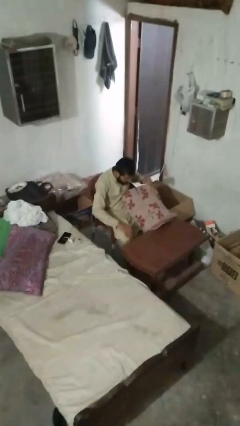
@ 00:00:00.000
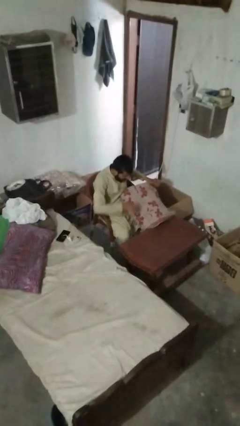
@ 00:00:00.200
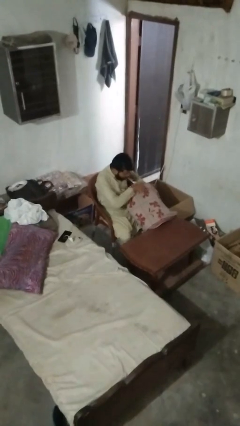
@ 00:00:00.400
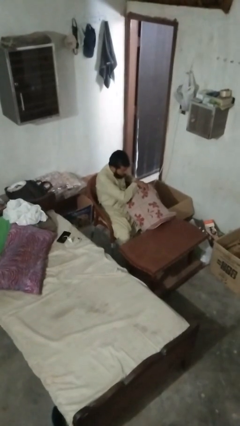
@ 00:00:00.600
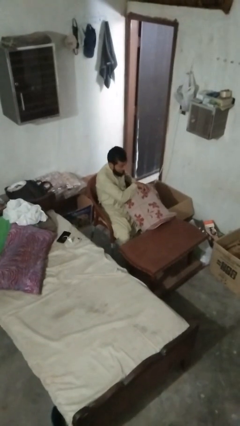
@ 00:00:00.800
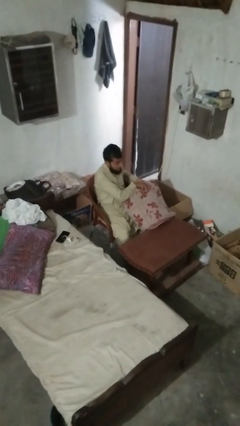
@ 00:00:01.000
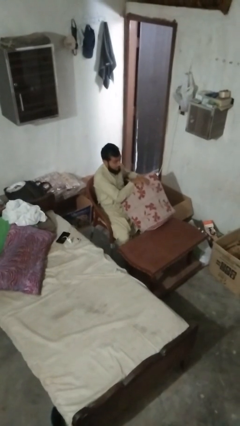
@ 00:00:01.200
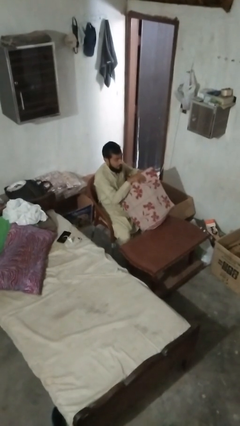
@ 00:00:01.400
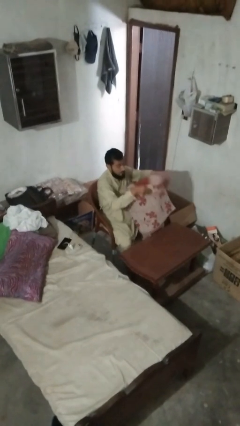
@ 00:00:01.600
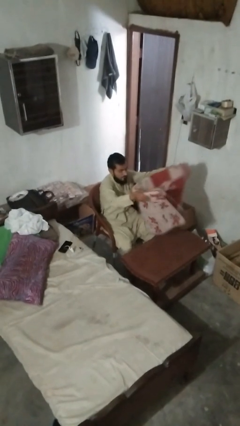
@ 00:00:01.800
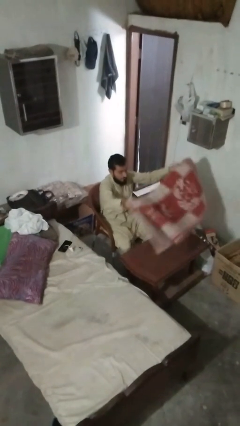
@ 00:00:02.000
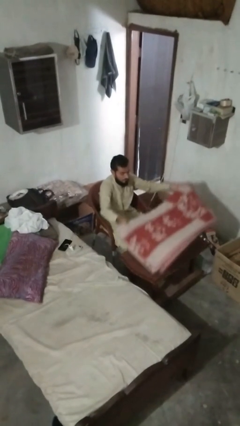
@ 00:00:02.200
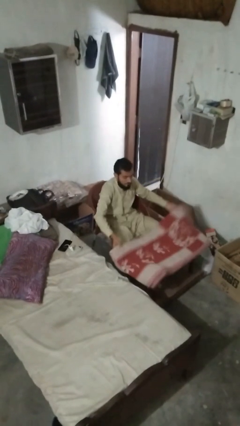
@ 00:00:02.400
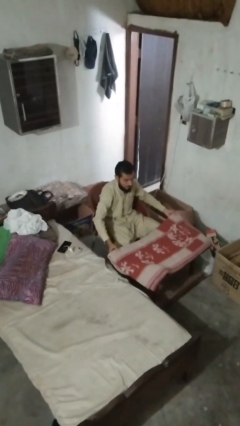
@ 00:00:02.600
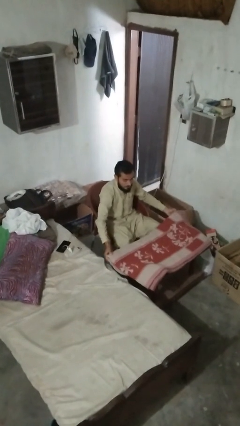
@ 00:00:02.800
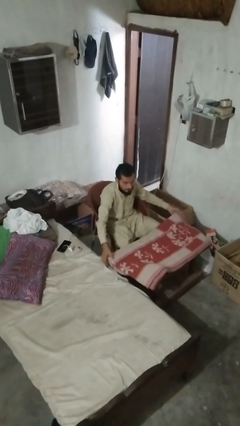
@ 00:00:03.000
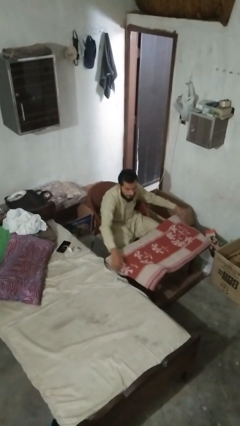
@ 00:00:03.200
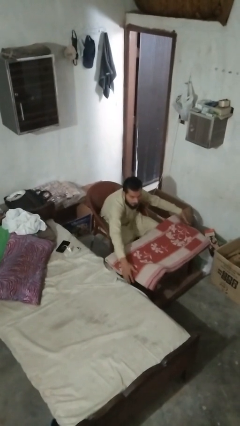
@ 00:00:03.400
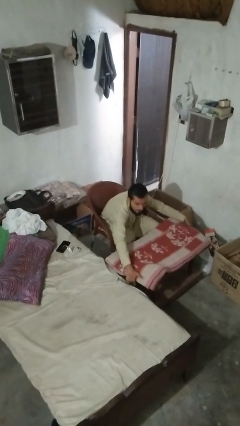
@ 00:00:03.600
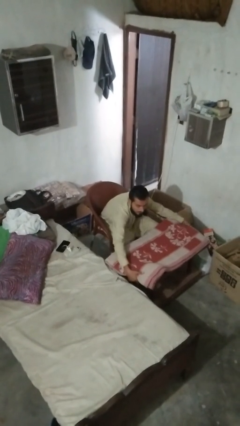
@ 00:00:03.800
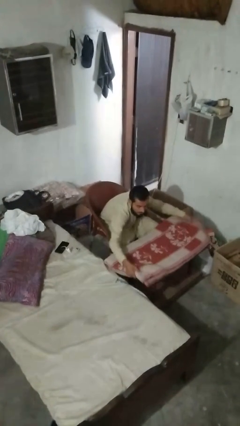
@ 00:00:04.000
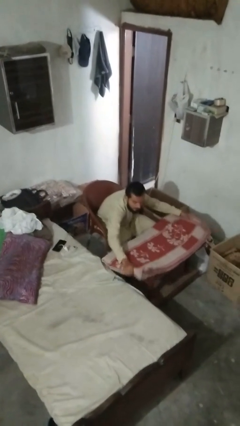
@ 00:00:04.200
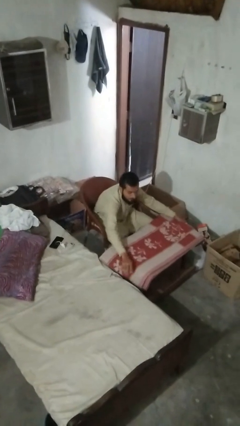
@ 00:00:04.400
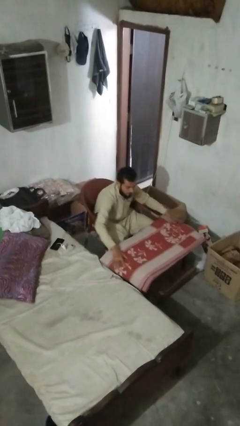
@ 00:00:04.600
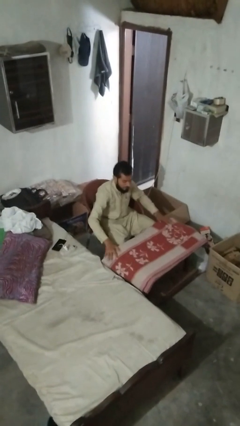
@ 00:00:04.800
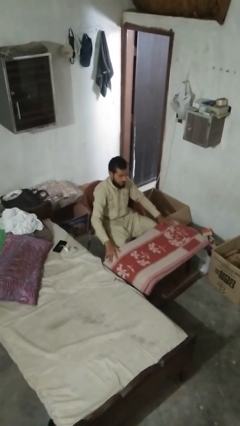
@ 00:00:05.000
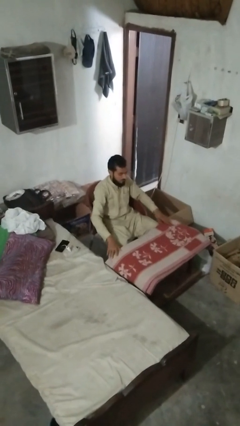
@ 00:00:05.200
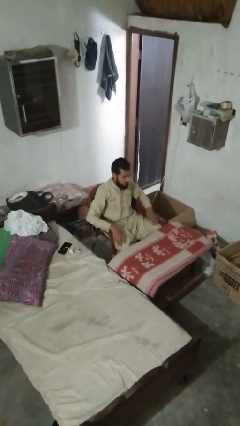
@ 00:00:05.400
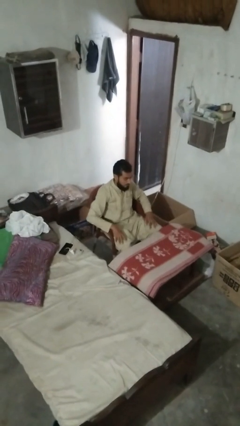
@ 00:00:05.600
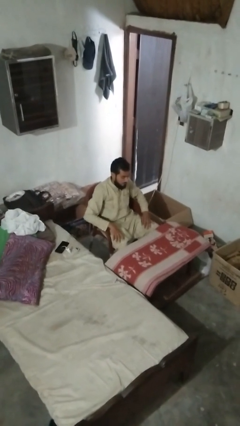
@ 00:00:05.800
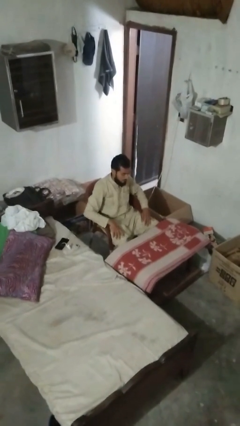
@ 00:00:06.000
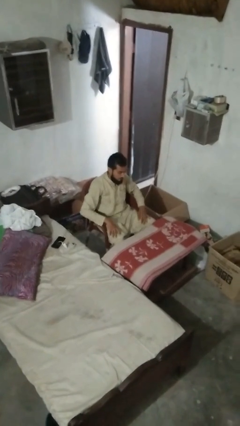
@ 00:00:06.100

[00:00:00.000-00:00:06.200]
person spreads tablecloth

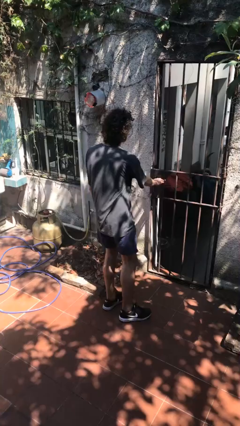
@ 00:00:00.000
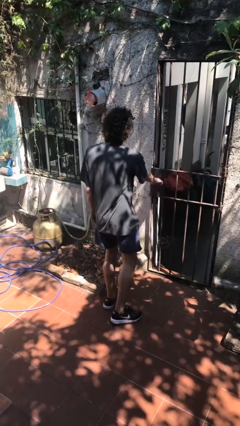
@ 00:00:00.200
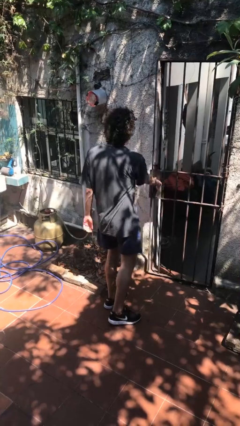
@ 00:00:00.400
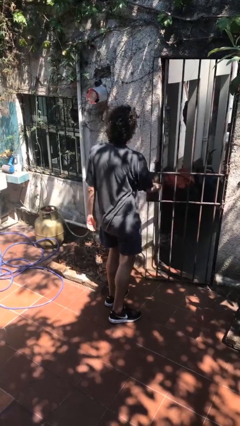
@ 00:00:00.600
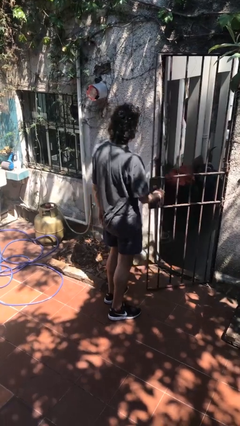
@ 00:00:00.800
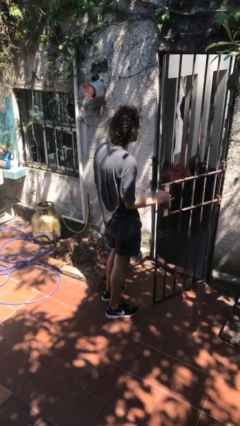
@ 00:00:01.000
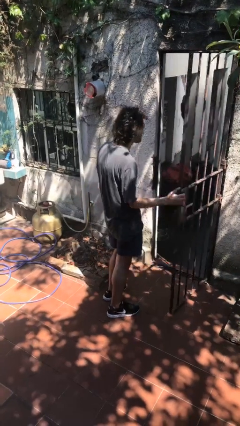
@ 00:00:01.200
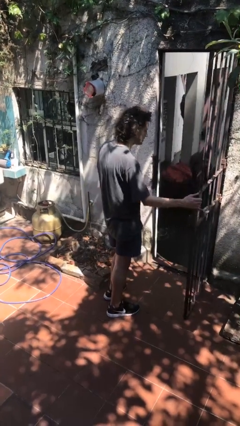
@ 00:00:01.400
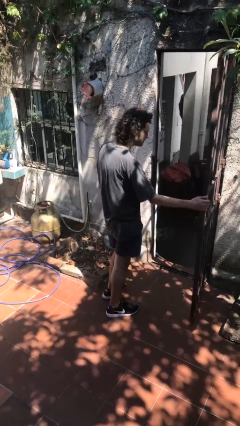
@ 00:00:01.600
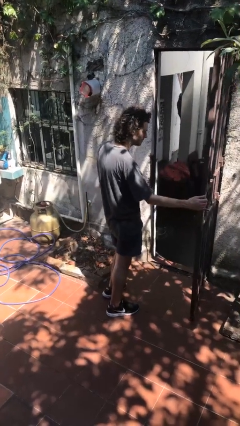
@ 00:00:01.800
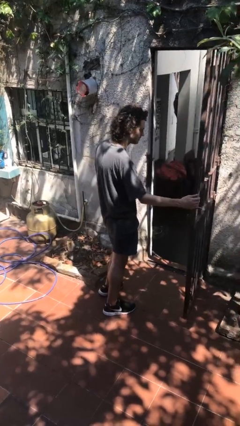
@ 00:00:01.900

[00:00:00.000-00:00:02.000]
person opens facility door

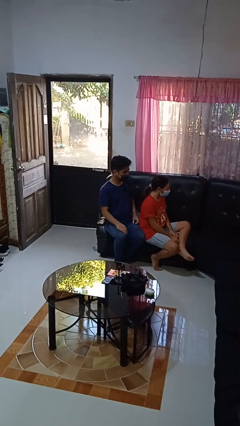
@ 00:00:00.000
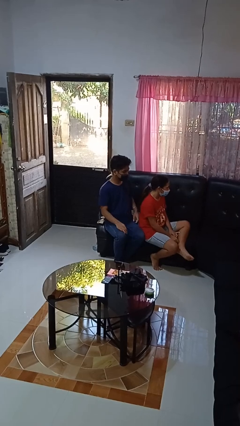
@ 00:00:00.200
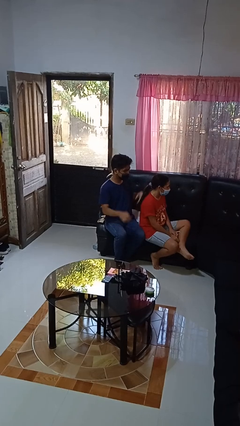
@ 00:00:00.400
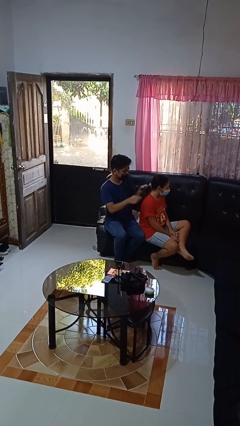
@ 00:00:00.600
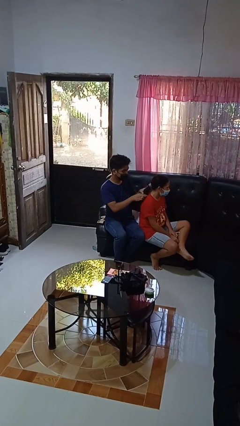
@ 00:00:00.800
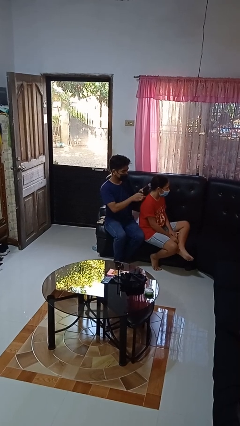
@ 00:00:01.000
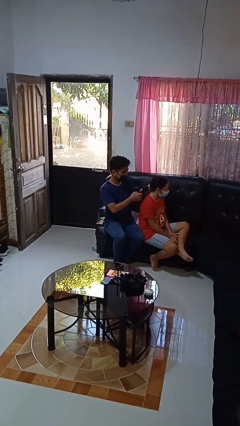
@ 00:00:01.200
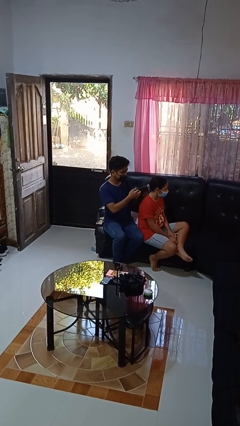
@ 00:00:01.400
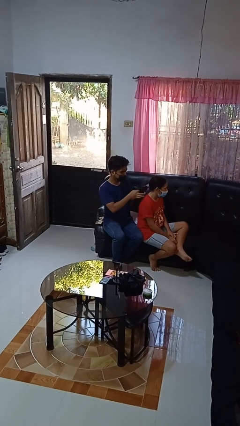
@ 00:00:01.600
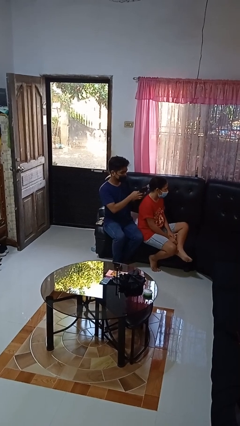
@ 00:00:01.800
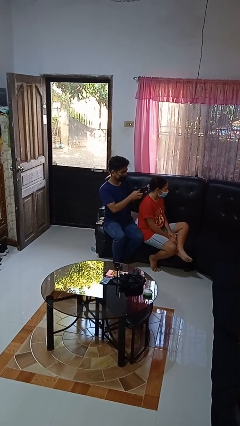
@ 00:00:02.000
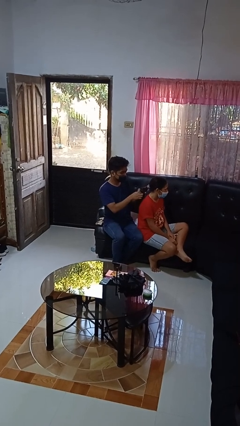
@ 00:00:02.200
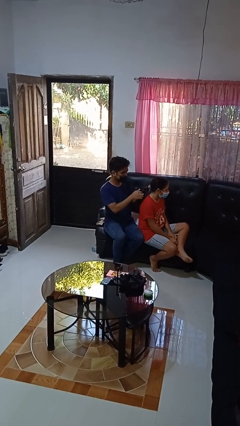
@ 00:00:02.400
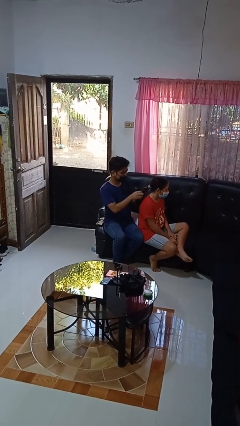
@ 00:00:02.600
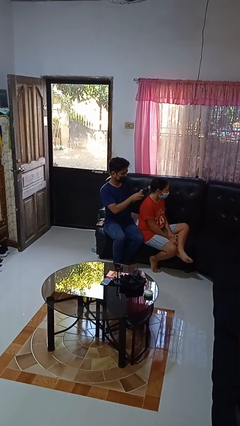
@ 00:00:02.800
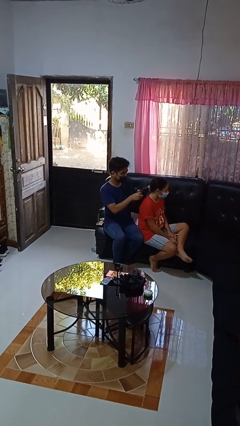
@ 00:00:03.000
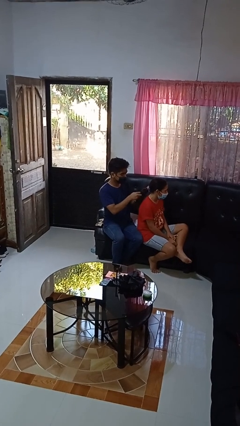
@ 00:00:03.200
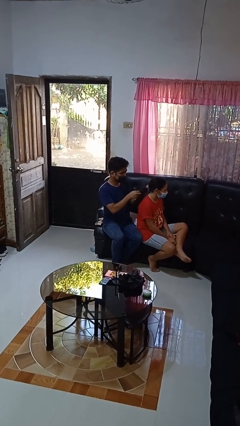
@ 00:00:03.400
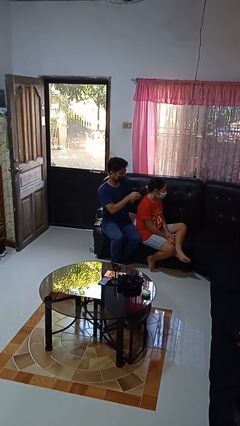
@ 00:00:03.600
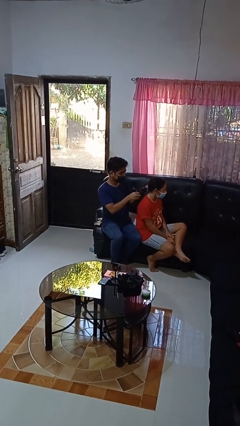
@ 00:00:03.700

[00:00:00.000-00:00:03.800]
person braids hair of person

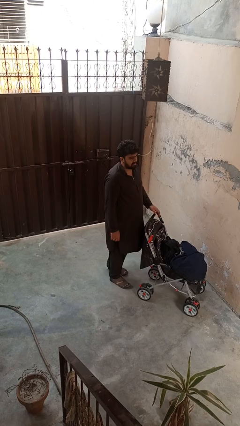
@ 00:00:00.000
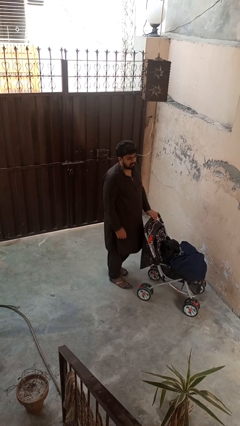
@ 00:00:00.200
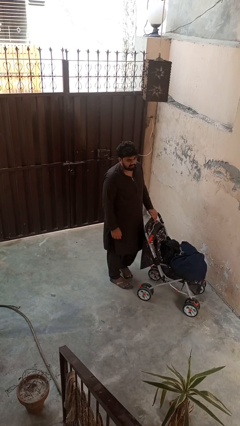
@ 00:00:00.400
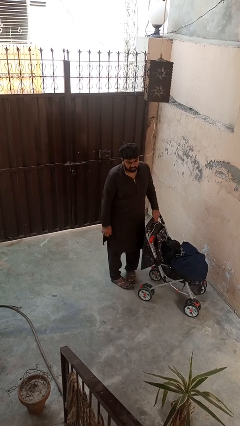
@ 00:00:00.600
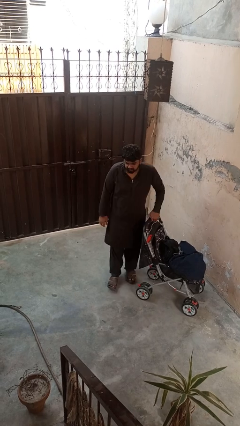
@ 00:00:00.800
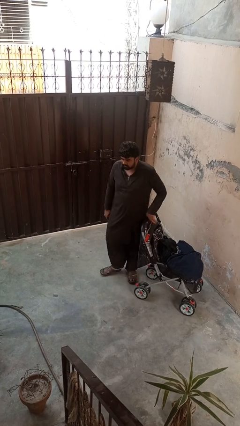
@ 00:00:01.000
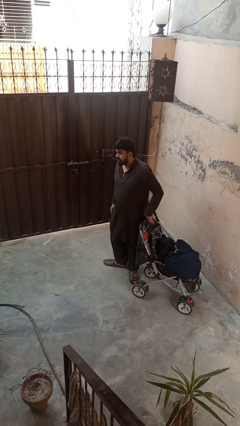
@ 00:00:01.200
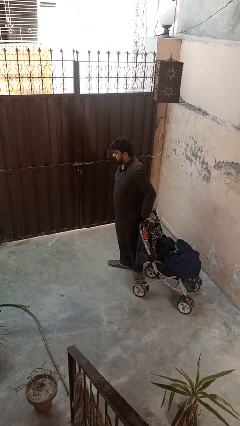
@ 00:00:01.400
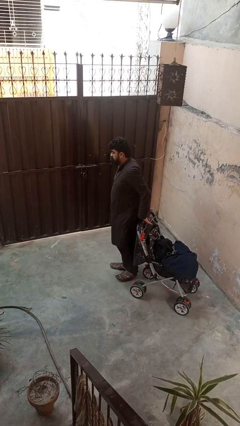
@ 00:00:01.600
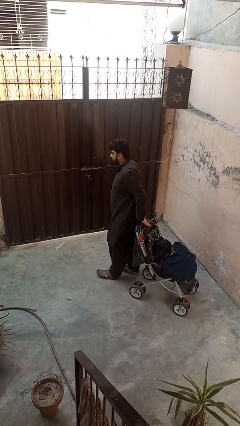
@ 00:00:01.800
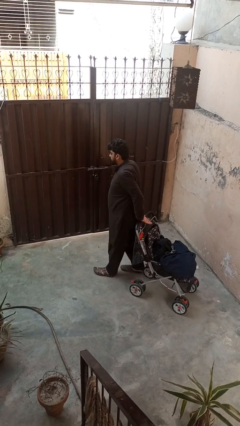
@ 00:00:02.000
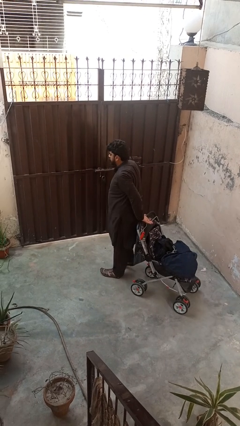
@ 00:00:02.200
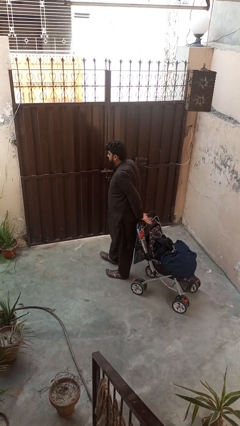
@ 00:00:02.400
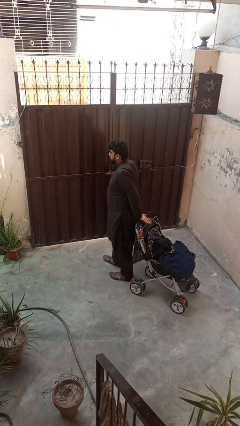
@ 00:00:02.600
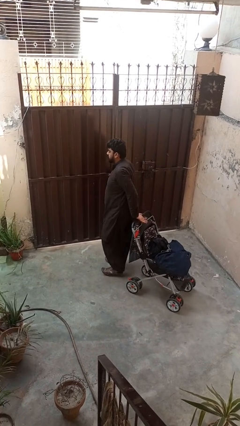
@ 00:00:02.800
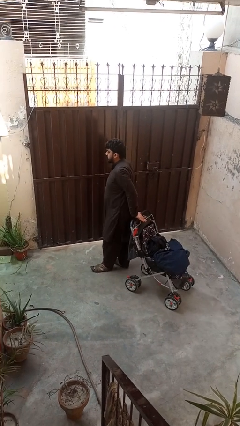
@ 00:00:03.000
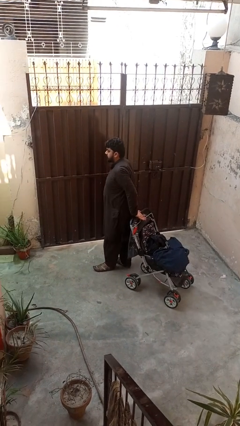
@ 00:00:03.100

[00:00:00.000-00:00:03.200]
person pulls wheeled cart

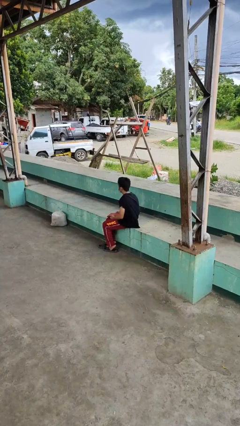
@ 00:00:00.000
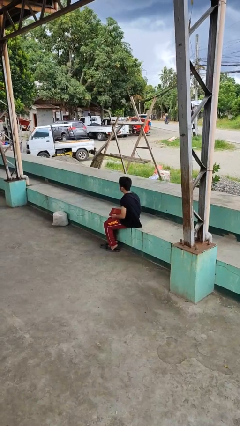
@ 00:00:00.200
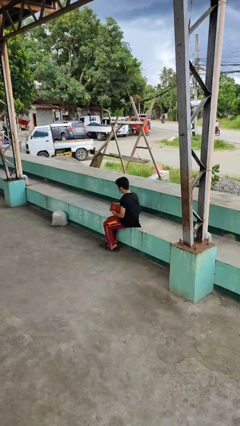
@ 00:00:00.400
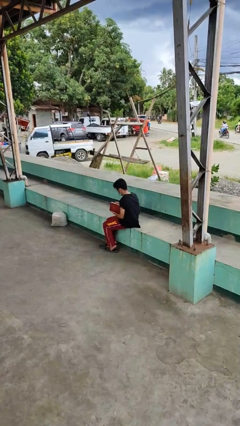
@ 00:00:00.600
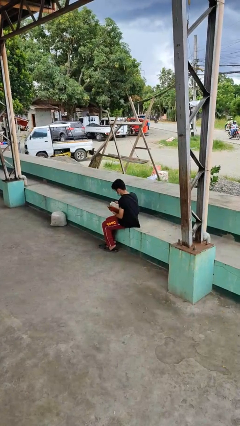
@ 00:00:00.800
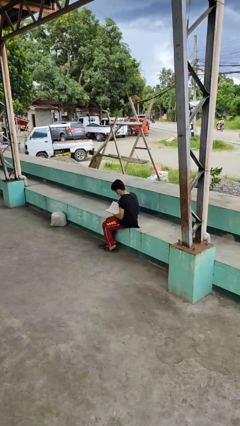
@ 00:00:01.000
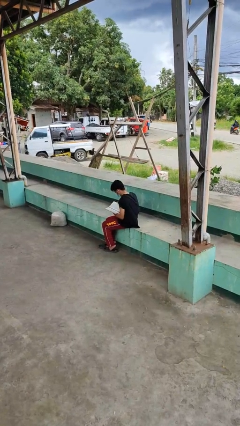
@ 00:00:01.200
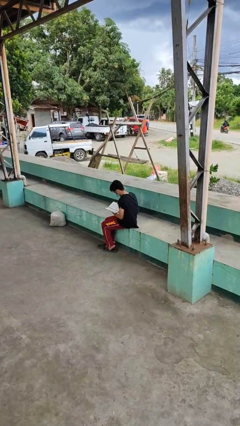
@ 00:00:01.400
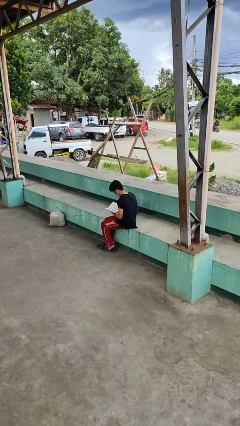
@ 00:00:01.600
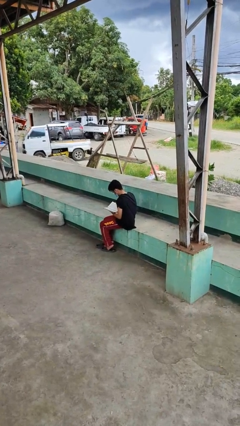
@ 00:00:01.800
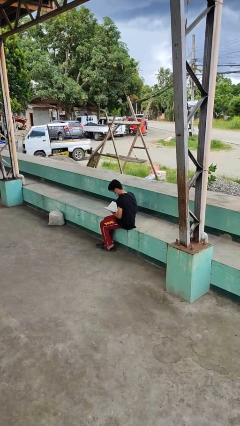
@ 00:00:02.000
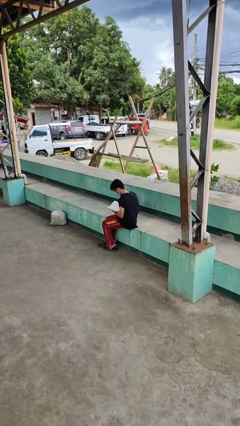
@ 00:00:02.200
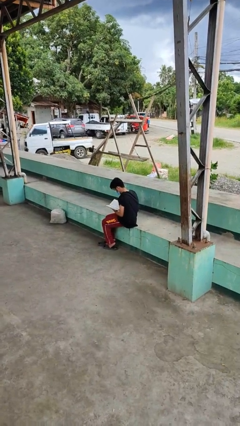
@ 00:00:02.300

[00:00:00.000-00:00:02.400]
person reads book
